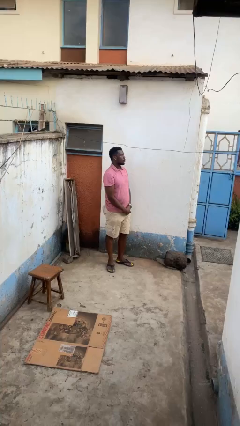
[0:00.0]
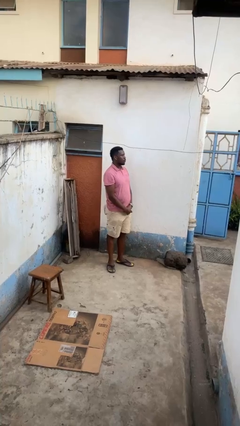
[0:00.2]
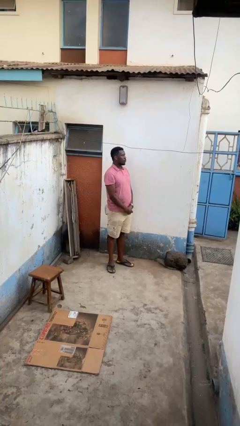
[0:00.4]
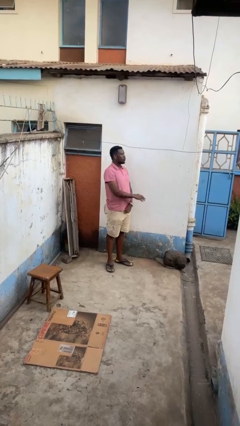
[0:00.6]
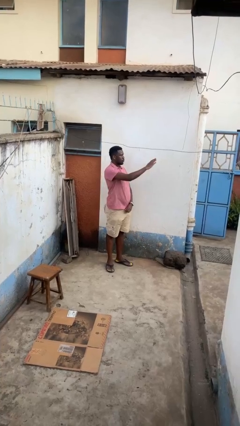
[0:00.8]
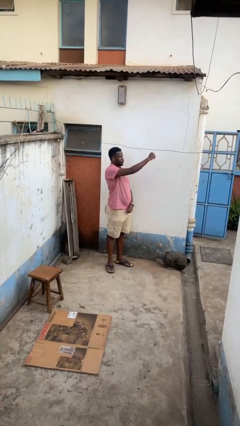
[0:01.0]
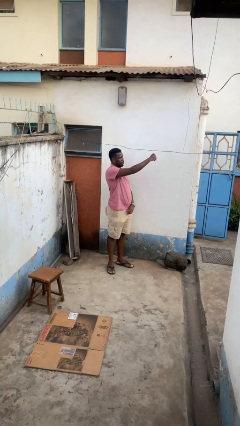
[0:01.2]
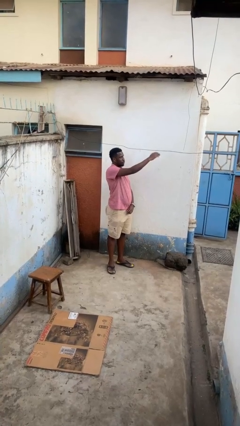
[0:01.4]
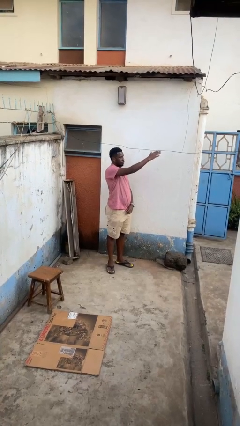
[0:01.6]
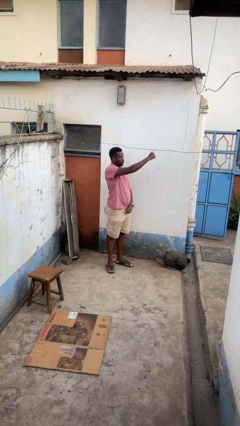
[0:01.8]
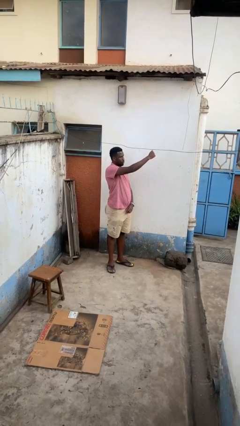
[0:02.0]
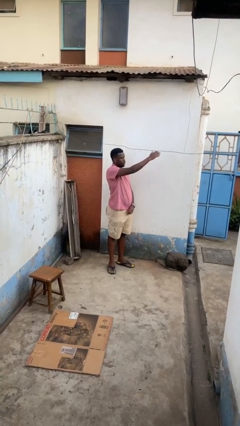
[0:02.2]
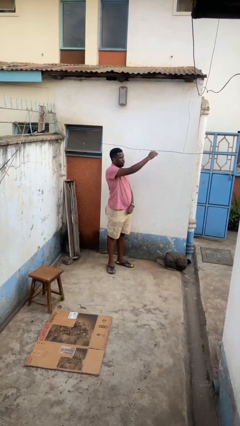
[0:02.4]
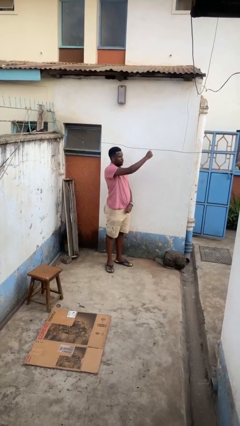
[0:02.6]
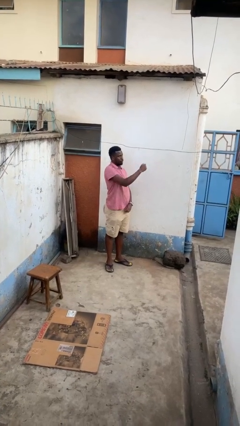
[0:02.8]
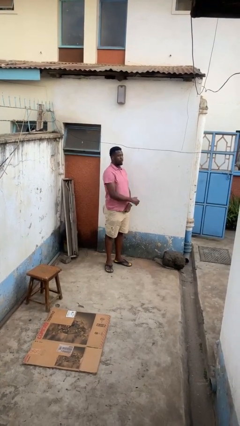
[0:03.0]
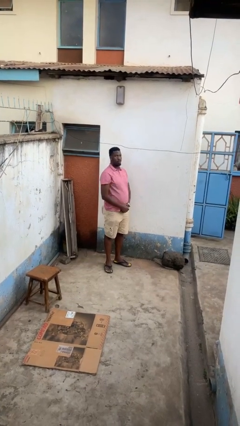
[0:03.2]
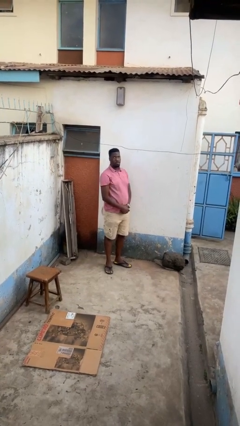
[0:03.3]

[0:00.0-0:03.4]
person gestures come here

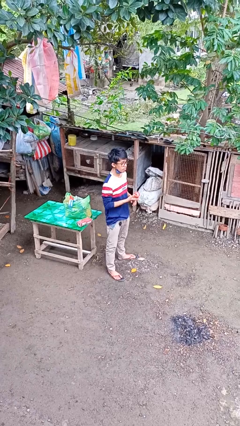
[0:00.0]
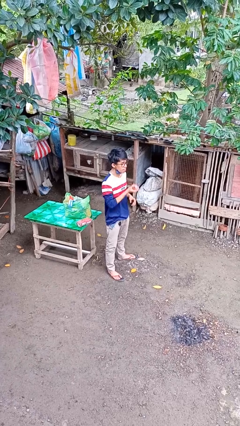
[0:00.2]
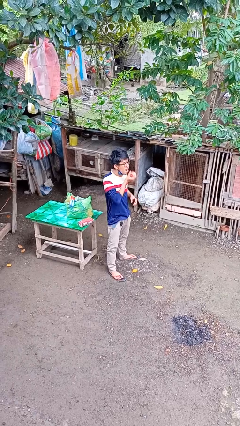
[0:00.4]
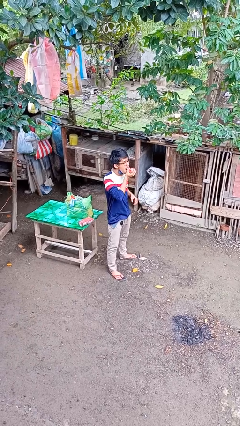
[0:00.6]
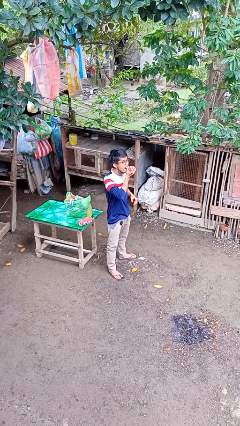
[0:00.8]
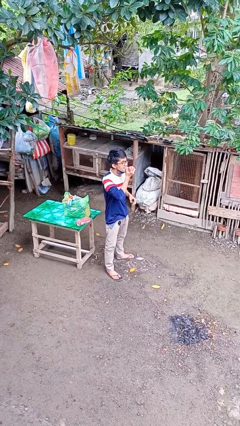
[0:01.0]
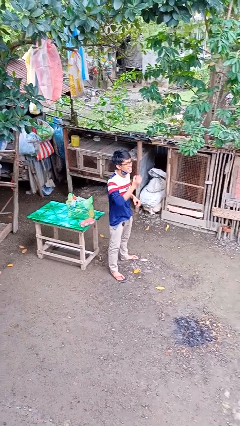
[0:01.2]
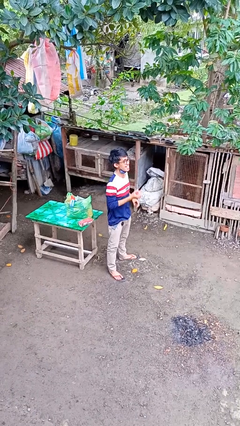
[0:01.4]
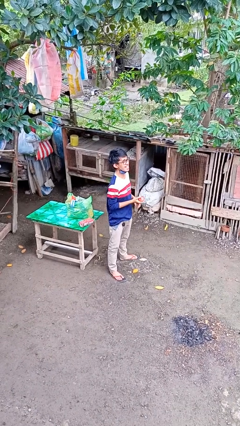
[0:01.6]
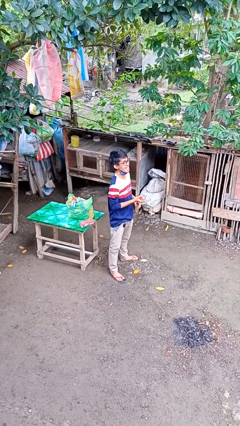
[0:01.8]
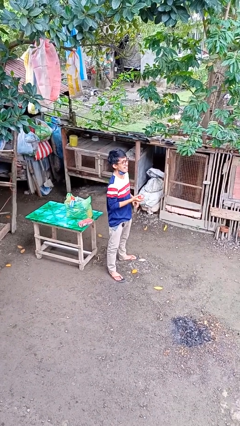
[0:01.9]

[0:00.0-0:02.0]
person eats apple

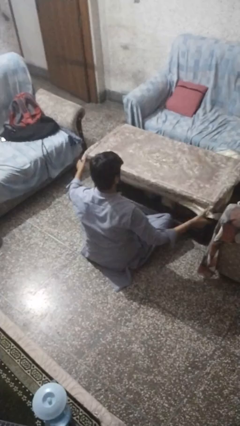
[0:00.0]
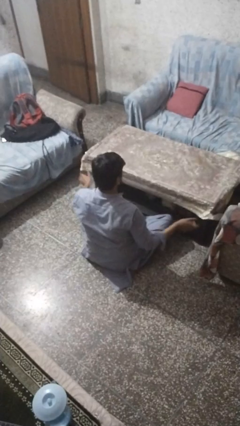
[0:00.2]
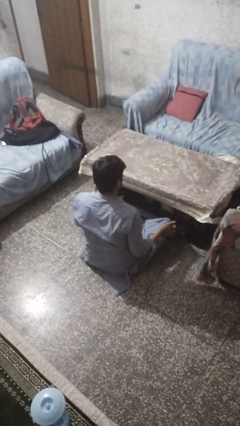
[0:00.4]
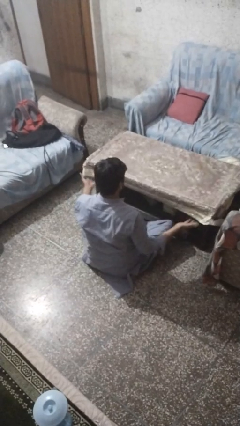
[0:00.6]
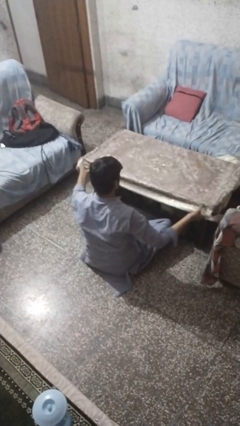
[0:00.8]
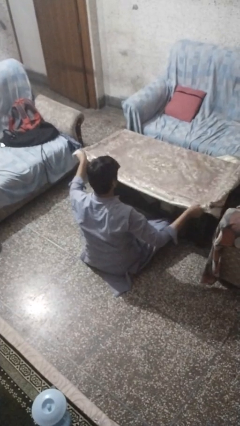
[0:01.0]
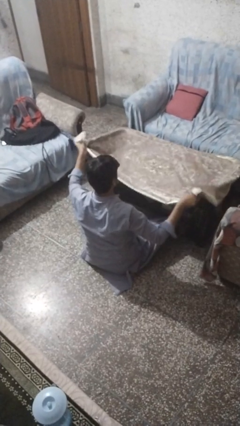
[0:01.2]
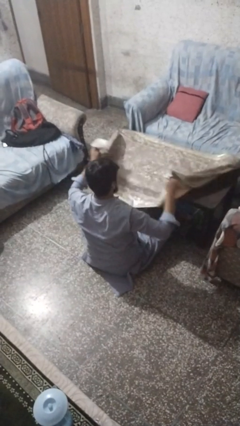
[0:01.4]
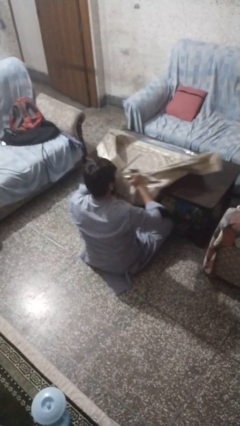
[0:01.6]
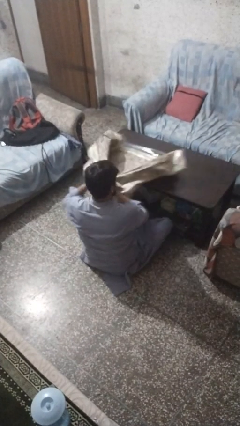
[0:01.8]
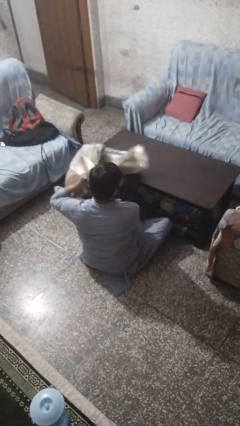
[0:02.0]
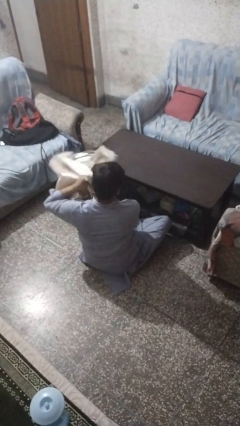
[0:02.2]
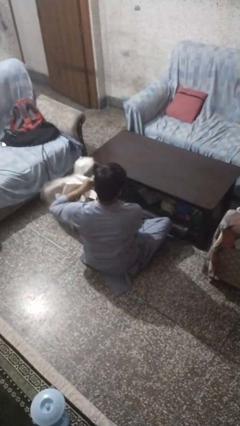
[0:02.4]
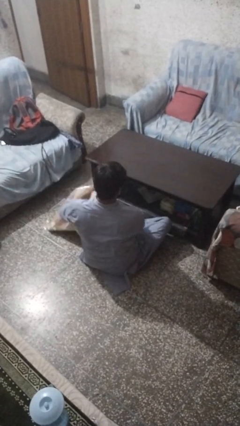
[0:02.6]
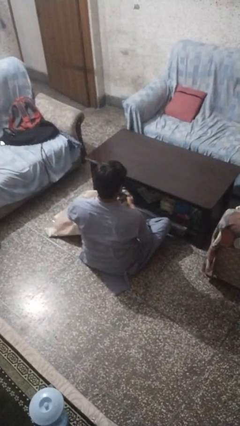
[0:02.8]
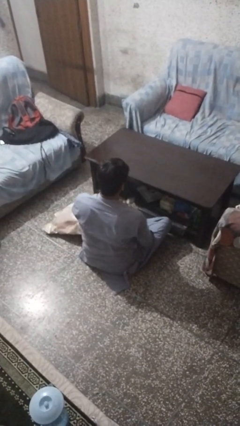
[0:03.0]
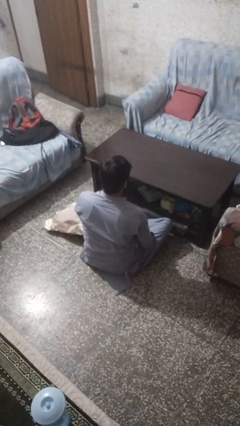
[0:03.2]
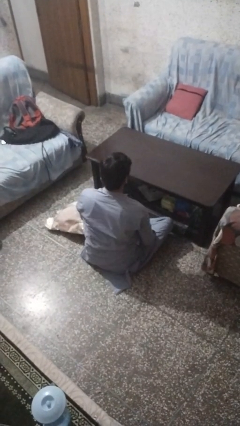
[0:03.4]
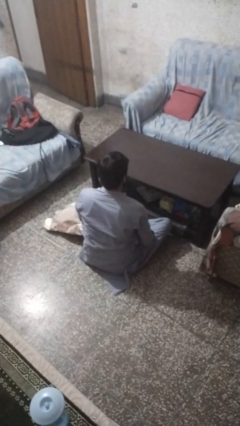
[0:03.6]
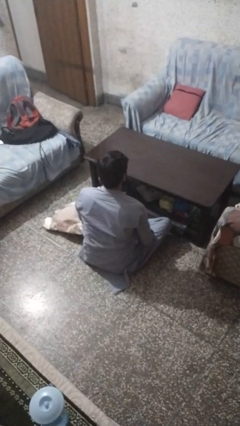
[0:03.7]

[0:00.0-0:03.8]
person folds tablecloth

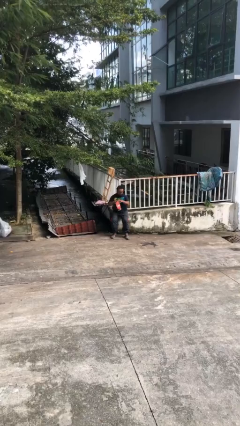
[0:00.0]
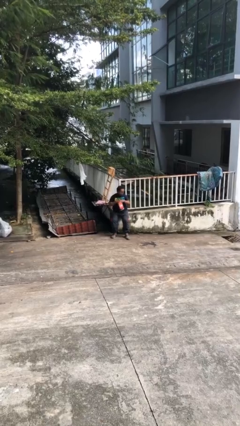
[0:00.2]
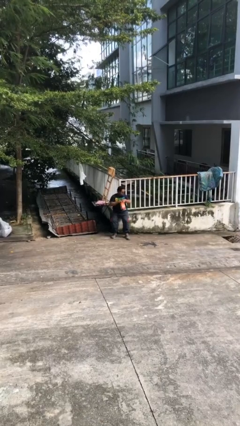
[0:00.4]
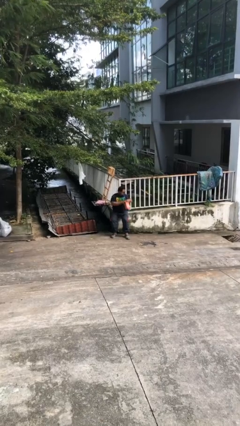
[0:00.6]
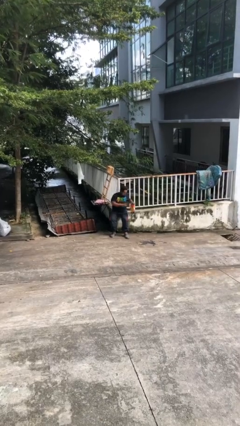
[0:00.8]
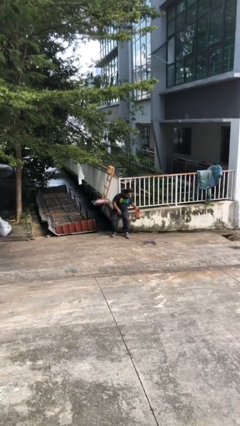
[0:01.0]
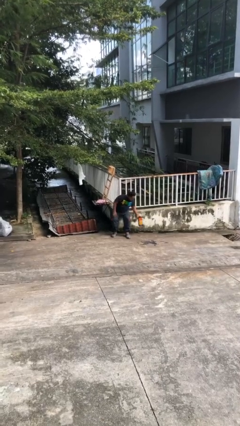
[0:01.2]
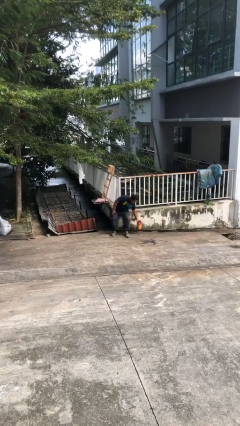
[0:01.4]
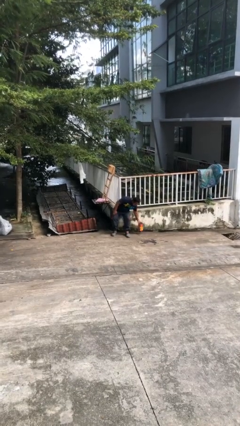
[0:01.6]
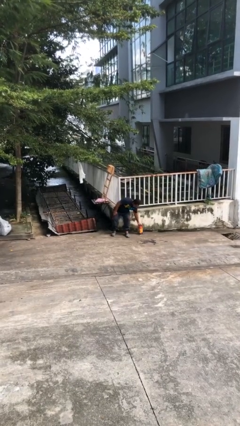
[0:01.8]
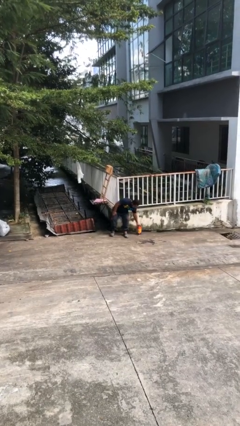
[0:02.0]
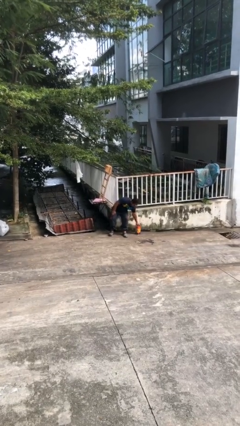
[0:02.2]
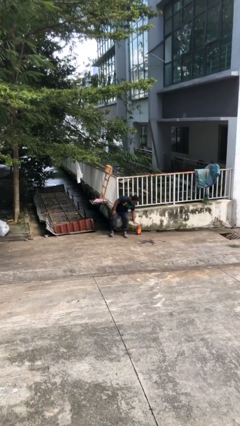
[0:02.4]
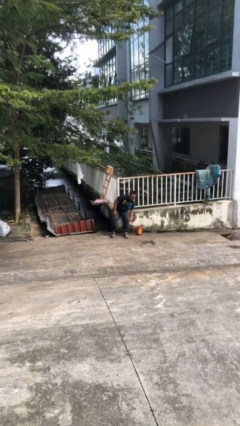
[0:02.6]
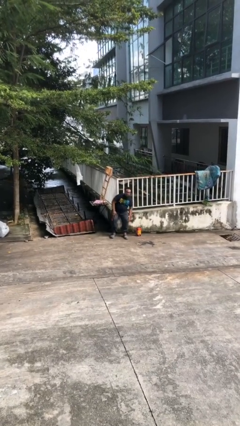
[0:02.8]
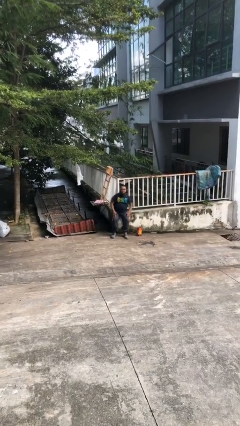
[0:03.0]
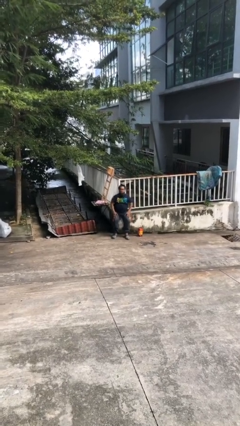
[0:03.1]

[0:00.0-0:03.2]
person puts down object on floor

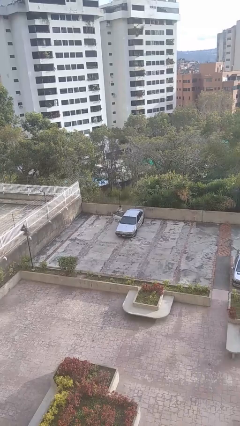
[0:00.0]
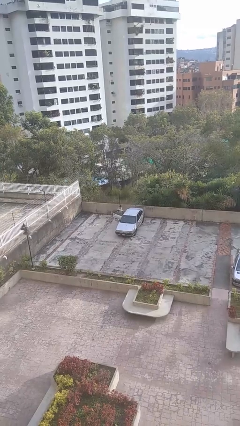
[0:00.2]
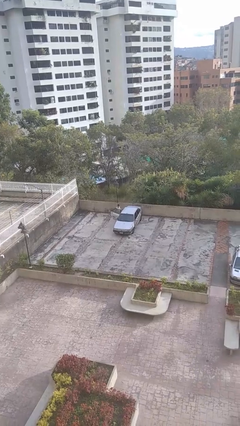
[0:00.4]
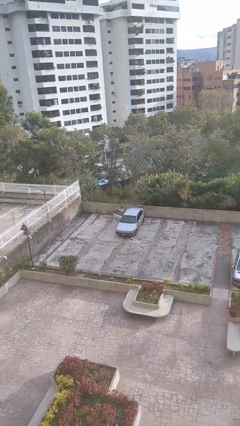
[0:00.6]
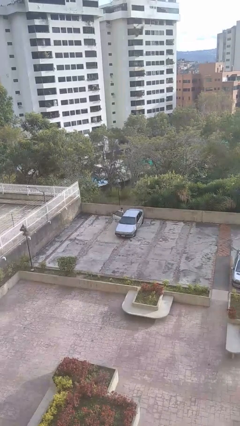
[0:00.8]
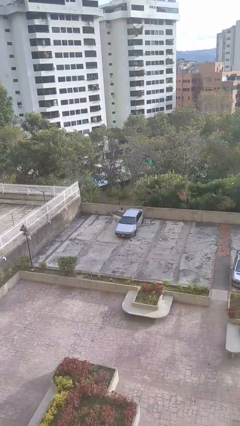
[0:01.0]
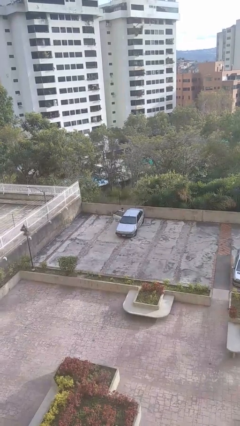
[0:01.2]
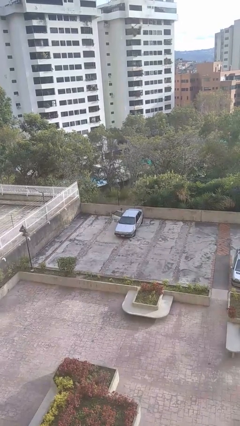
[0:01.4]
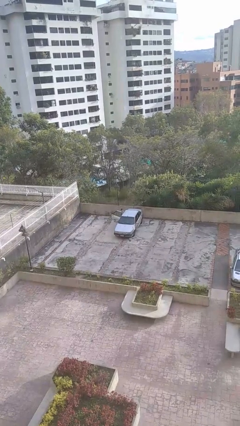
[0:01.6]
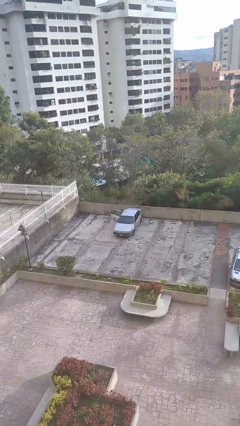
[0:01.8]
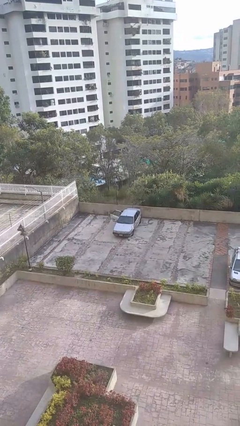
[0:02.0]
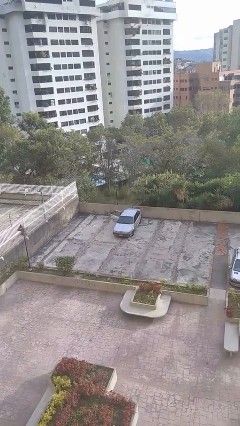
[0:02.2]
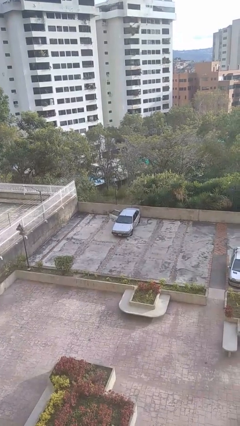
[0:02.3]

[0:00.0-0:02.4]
person enters car

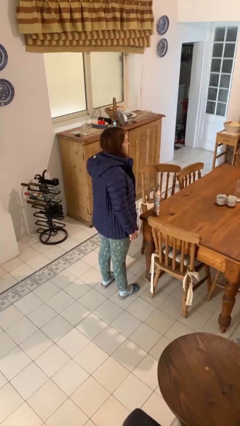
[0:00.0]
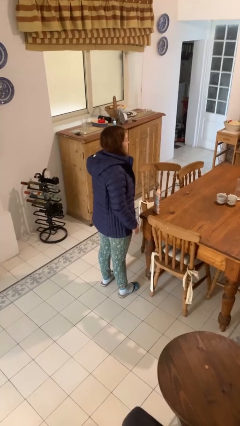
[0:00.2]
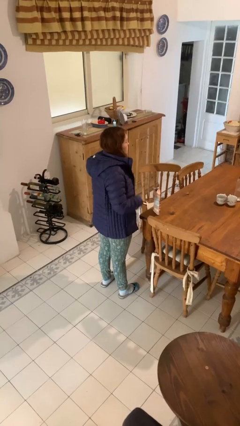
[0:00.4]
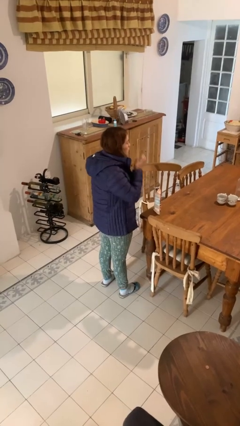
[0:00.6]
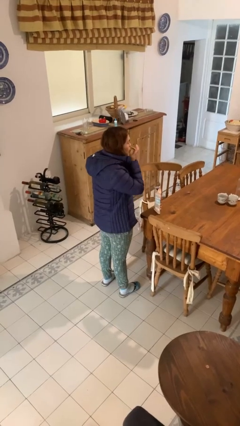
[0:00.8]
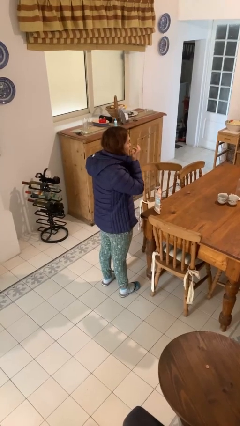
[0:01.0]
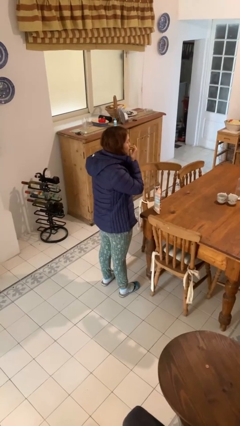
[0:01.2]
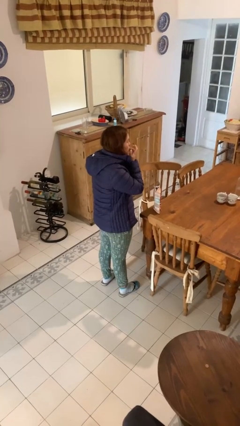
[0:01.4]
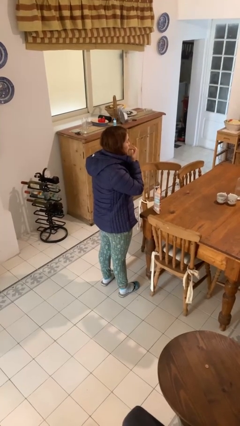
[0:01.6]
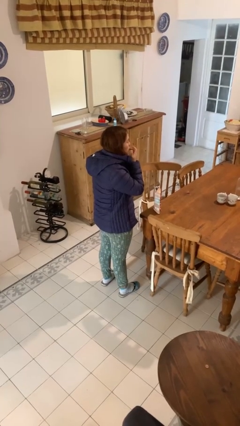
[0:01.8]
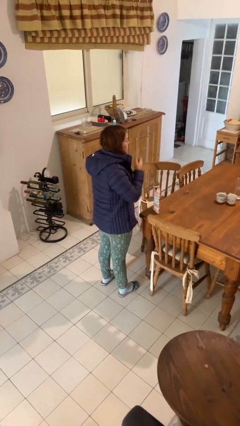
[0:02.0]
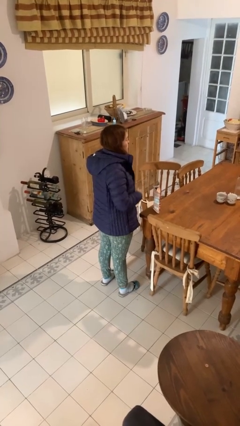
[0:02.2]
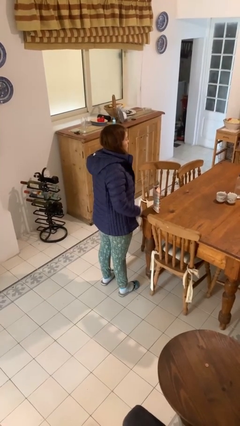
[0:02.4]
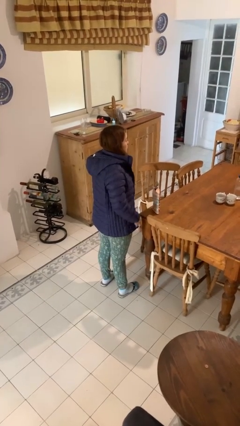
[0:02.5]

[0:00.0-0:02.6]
person licks fingers
